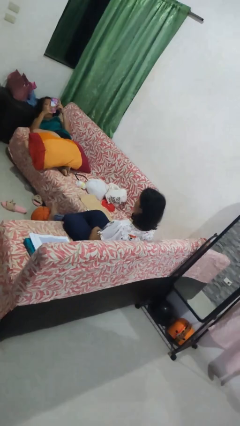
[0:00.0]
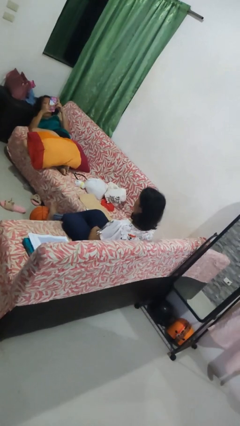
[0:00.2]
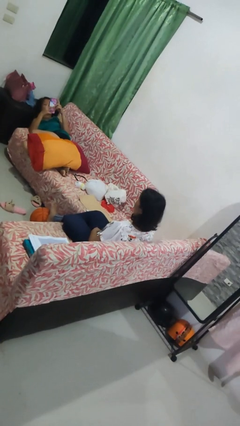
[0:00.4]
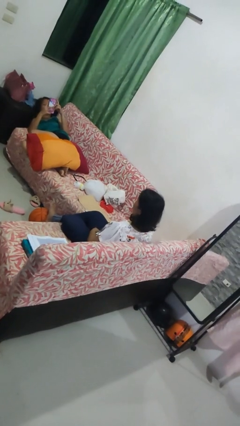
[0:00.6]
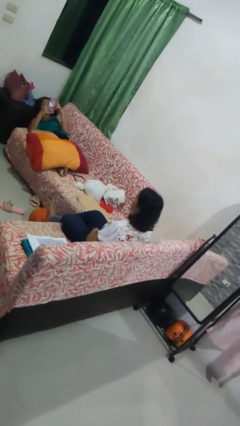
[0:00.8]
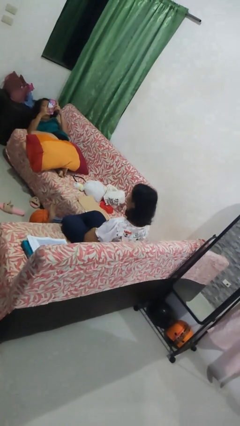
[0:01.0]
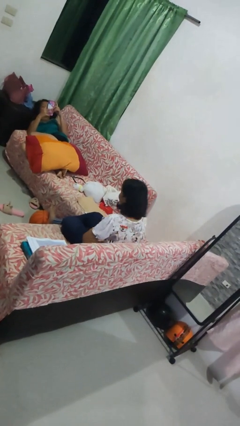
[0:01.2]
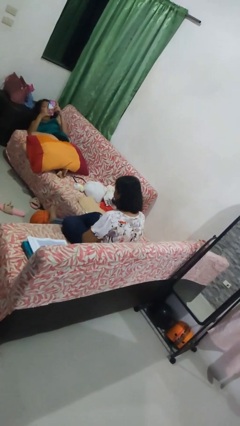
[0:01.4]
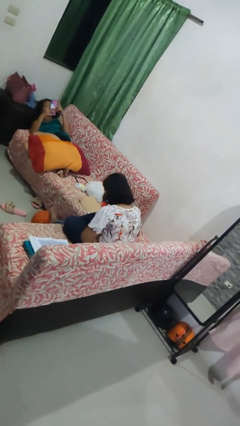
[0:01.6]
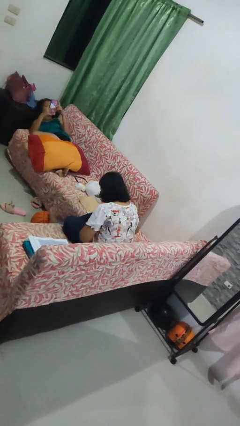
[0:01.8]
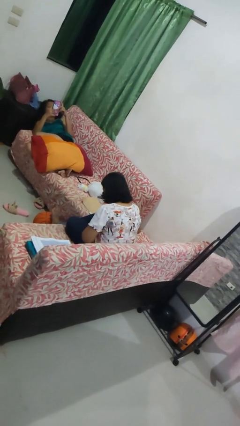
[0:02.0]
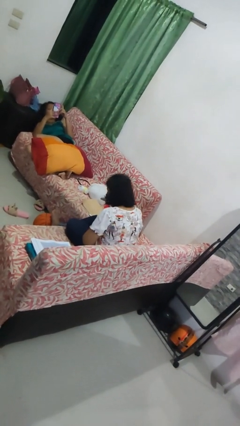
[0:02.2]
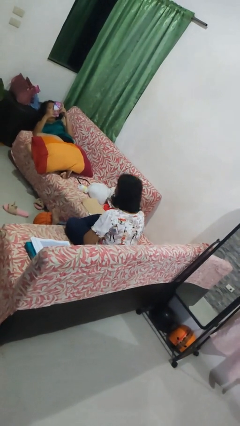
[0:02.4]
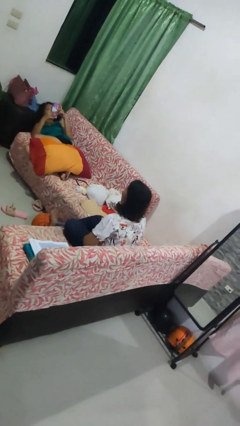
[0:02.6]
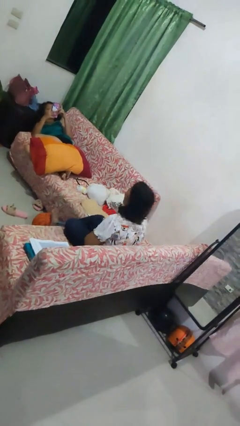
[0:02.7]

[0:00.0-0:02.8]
person laughs with person

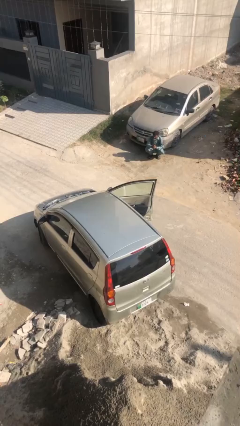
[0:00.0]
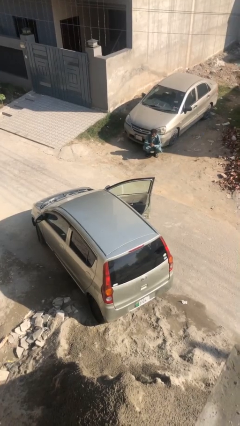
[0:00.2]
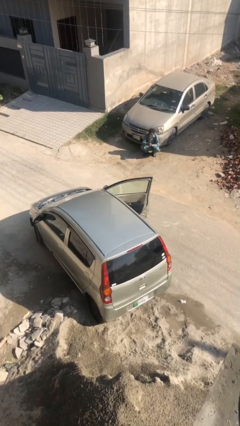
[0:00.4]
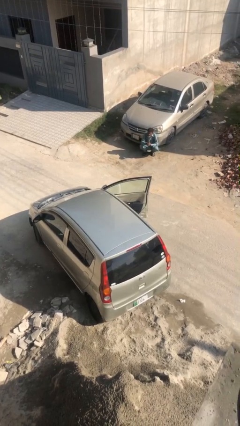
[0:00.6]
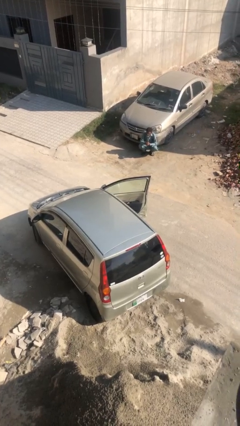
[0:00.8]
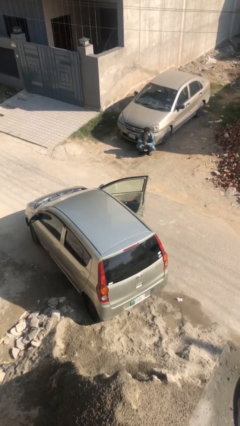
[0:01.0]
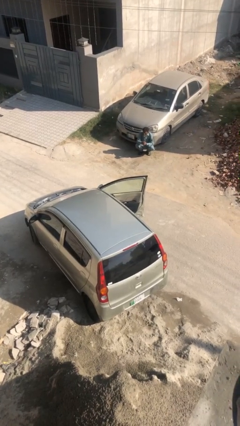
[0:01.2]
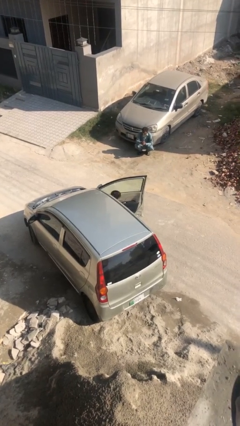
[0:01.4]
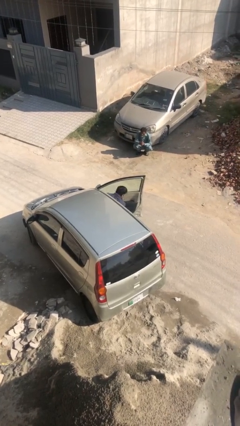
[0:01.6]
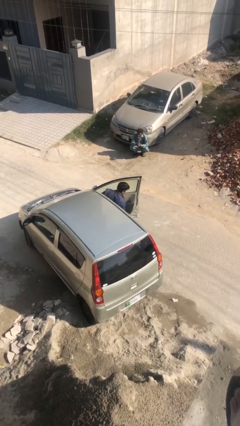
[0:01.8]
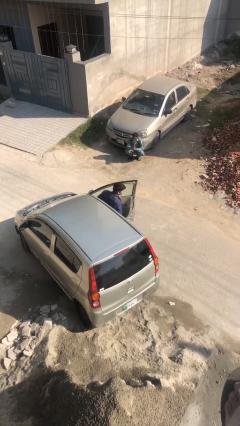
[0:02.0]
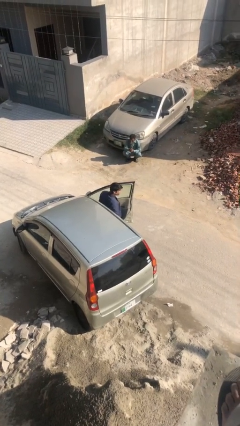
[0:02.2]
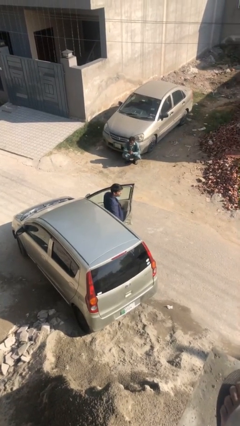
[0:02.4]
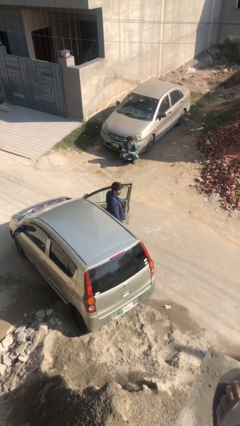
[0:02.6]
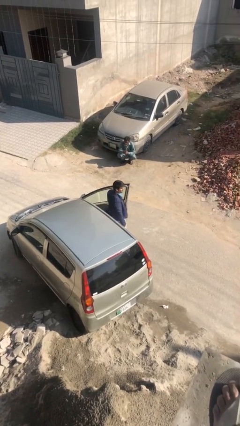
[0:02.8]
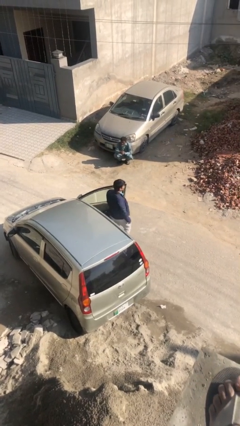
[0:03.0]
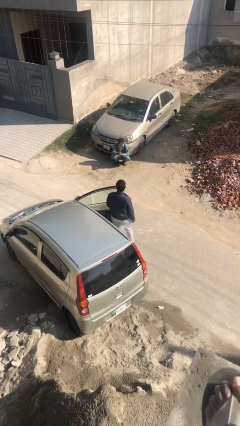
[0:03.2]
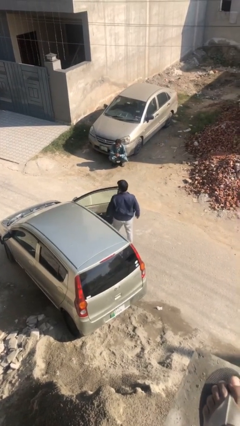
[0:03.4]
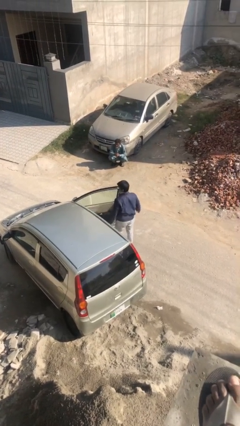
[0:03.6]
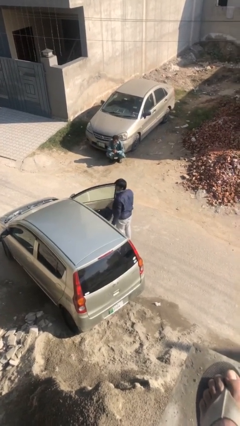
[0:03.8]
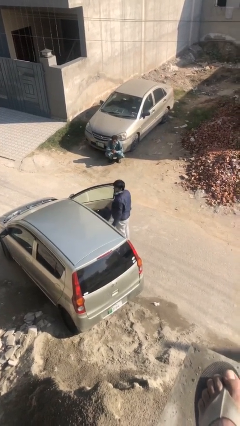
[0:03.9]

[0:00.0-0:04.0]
person exits car

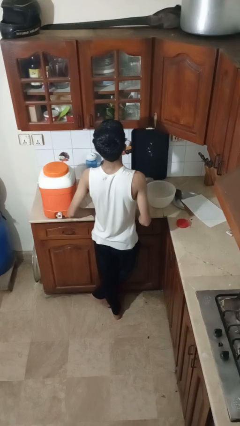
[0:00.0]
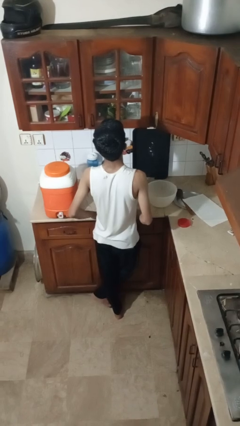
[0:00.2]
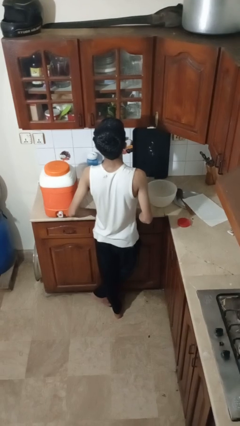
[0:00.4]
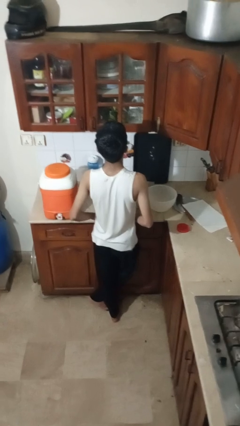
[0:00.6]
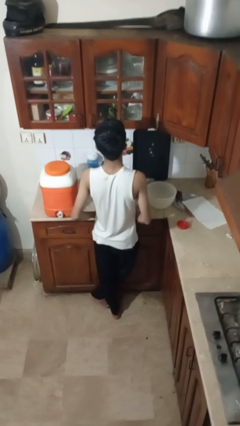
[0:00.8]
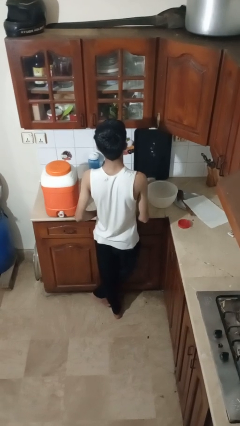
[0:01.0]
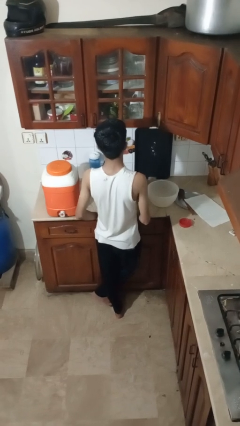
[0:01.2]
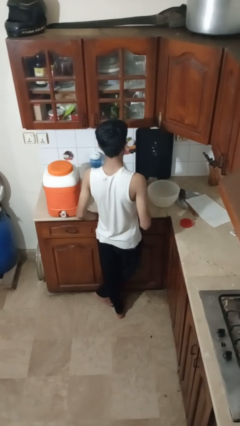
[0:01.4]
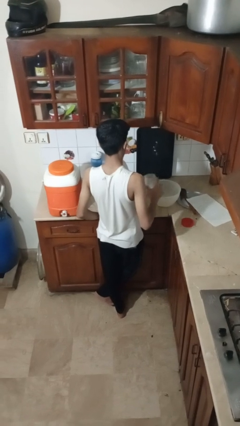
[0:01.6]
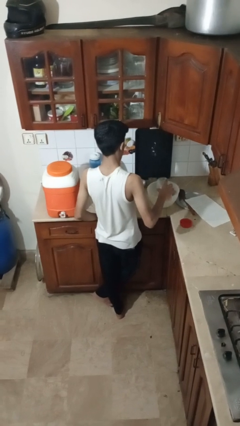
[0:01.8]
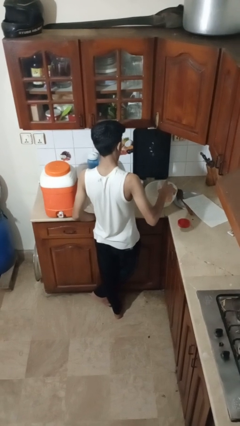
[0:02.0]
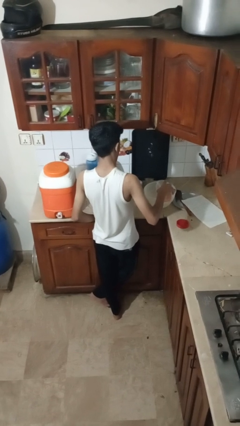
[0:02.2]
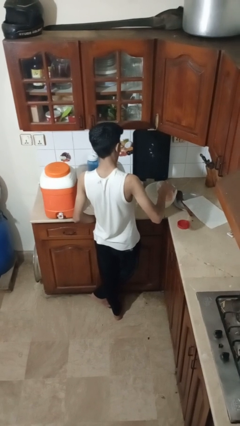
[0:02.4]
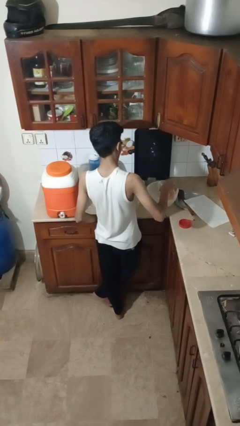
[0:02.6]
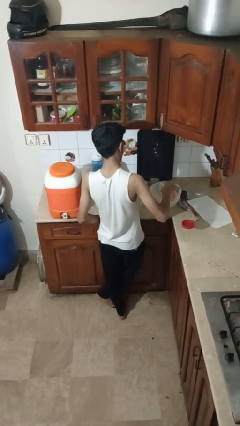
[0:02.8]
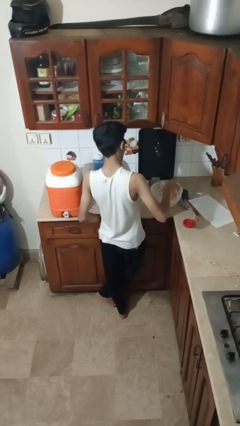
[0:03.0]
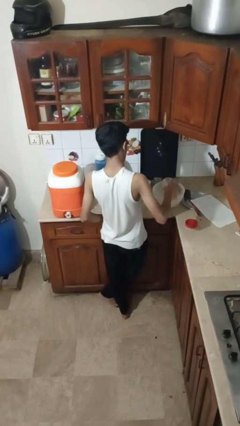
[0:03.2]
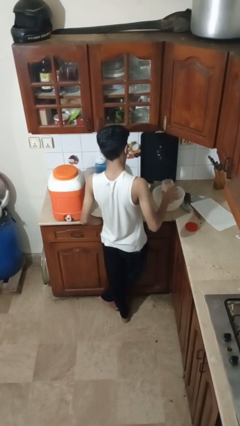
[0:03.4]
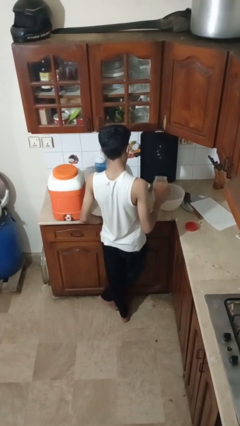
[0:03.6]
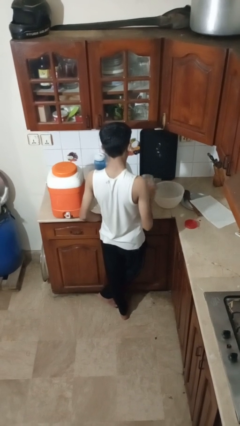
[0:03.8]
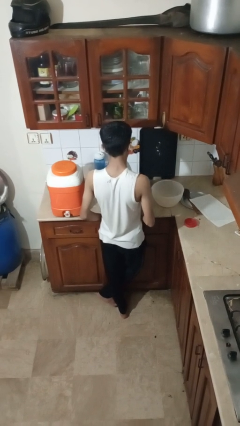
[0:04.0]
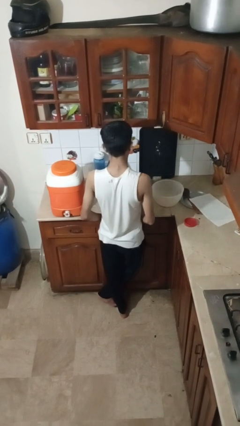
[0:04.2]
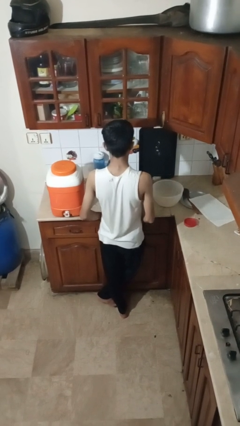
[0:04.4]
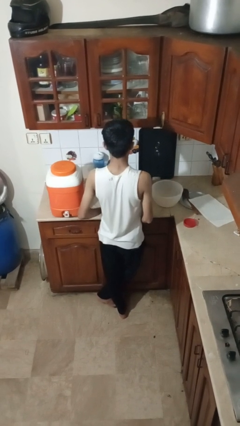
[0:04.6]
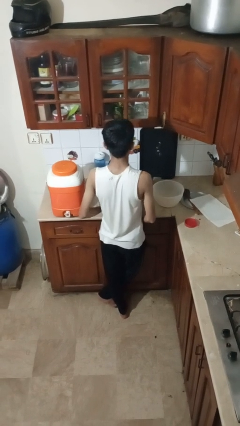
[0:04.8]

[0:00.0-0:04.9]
person pours into bowl

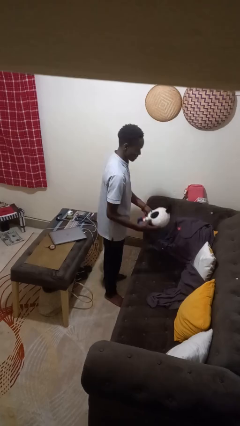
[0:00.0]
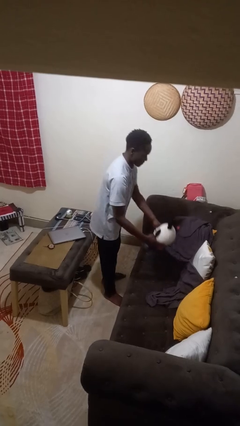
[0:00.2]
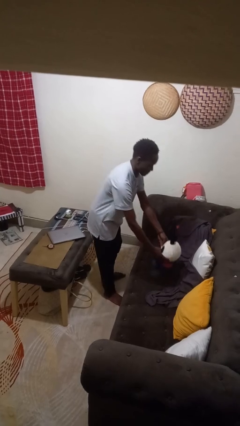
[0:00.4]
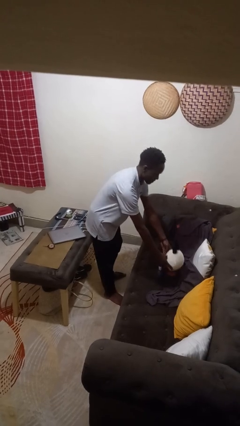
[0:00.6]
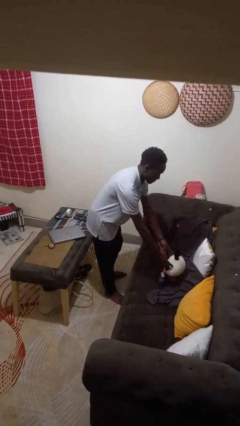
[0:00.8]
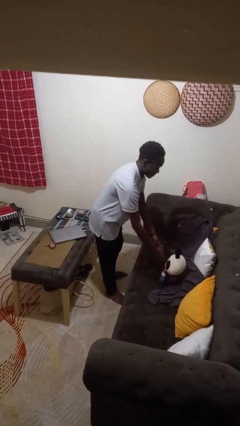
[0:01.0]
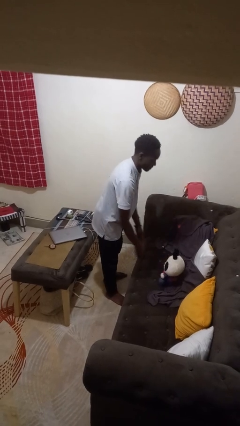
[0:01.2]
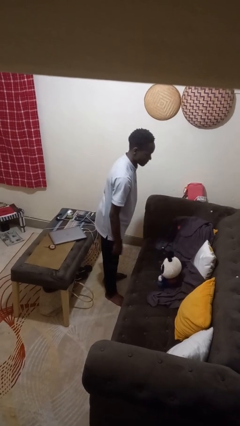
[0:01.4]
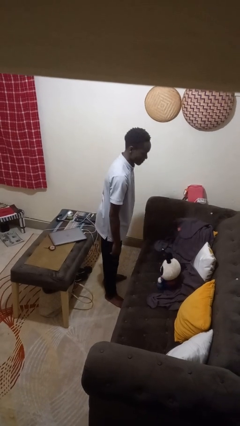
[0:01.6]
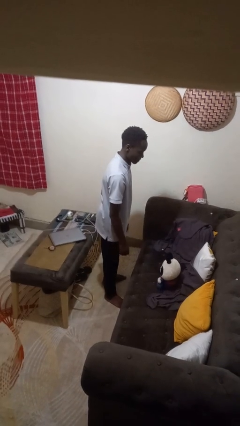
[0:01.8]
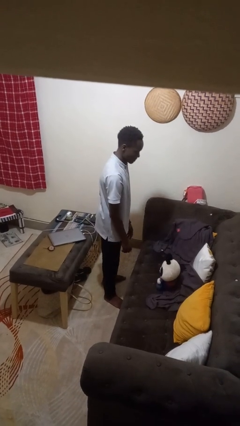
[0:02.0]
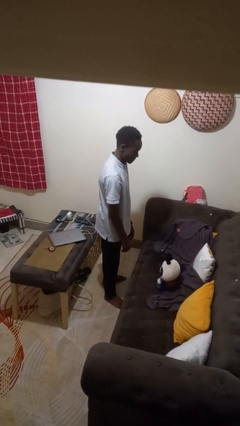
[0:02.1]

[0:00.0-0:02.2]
person puts down object on couch

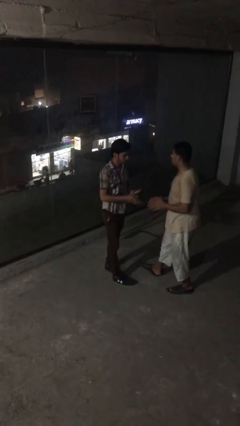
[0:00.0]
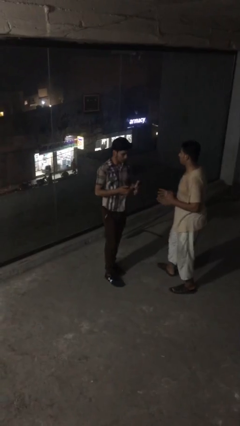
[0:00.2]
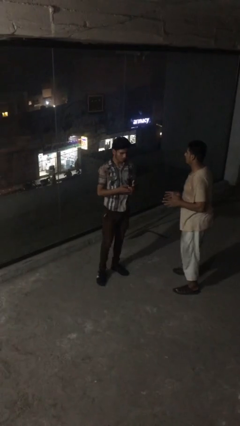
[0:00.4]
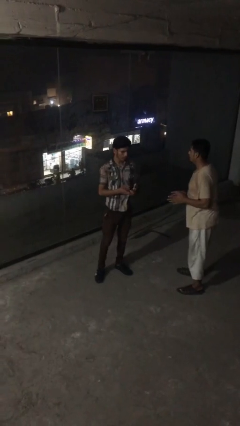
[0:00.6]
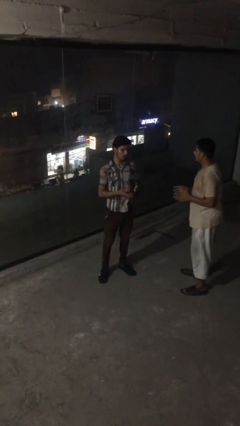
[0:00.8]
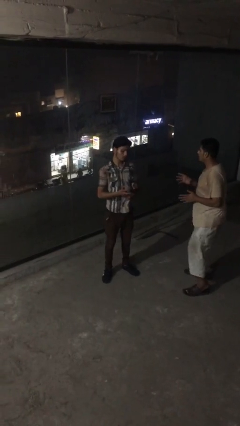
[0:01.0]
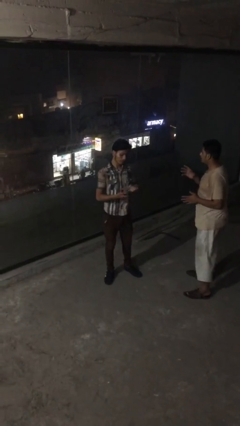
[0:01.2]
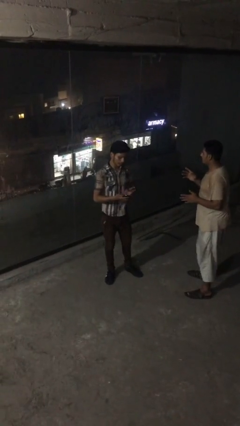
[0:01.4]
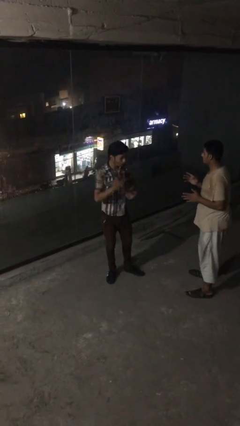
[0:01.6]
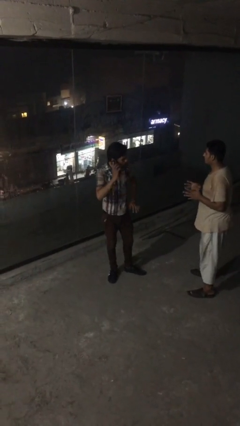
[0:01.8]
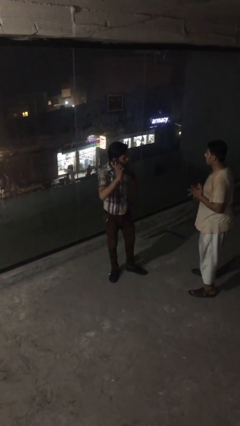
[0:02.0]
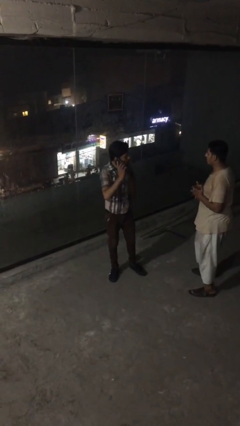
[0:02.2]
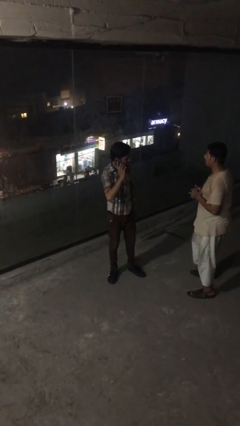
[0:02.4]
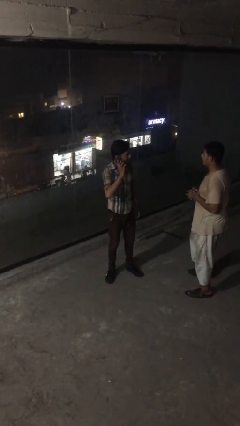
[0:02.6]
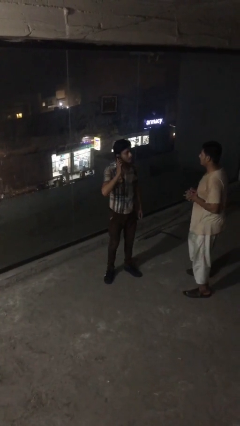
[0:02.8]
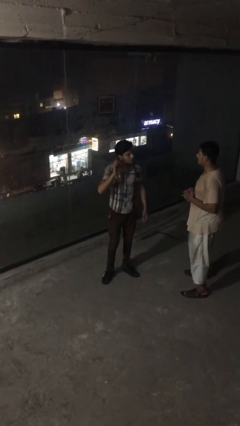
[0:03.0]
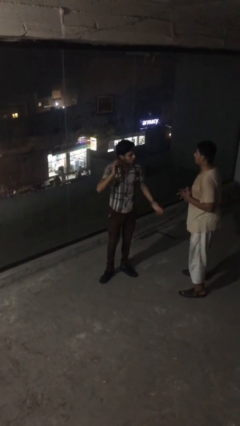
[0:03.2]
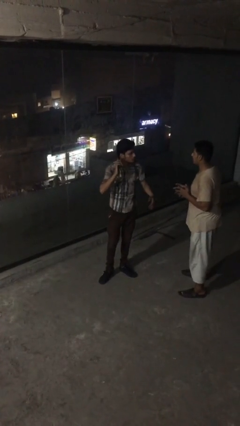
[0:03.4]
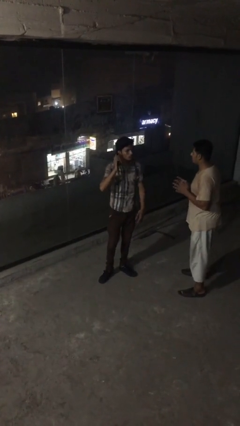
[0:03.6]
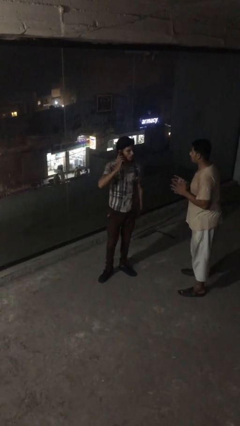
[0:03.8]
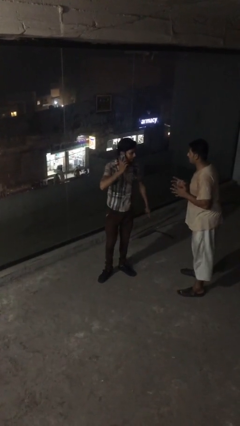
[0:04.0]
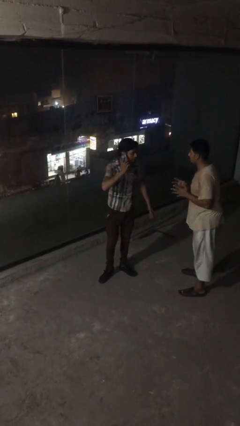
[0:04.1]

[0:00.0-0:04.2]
person talks to person
